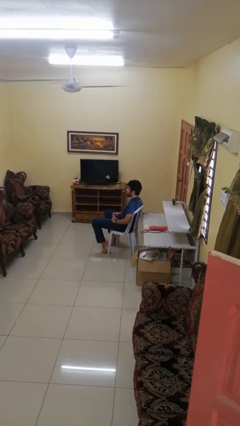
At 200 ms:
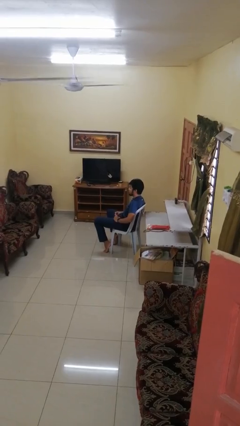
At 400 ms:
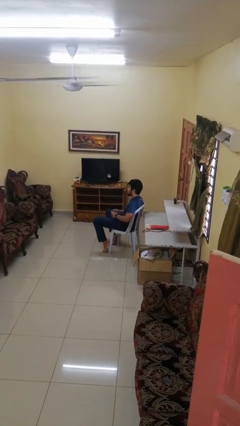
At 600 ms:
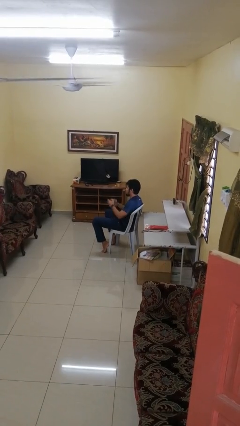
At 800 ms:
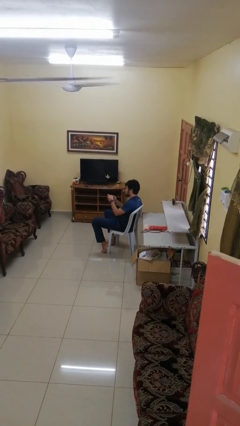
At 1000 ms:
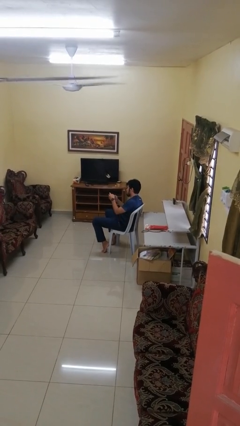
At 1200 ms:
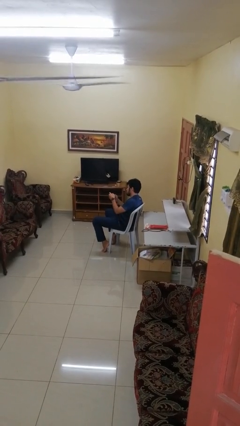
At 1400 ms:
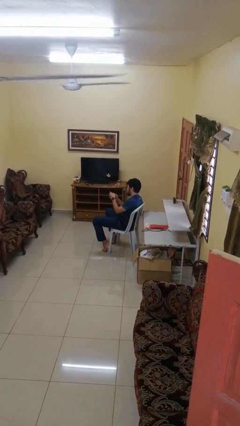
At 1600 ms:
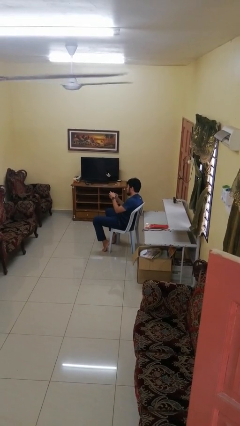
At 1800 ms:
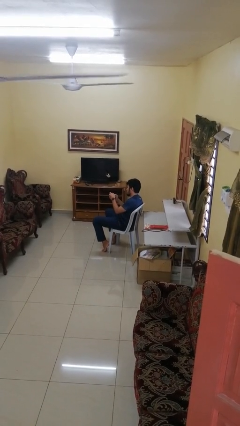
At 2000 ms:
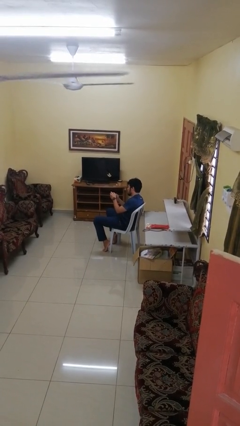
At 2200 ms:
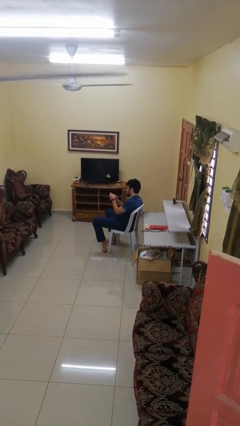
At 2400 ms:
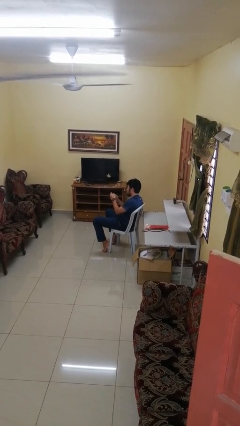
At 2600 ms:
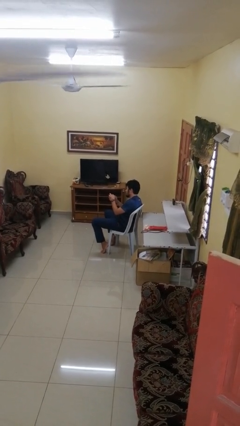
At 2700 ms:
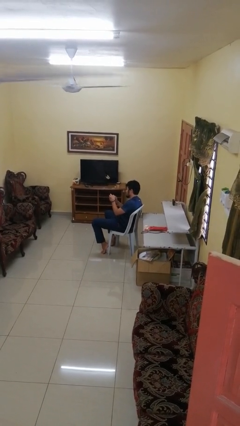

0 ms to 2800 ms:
person interacts with handheld game

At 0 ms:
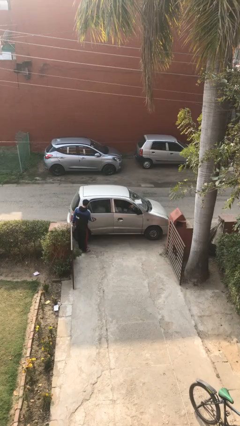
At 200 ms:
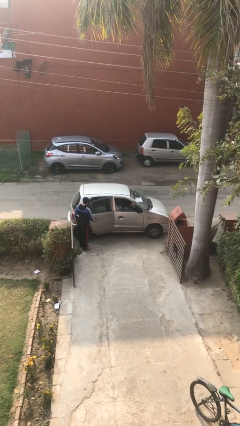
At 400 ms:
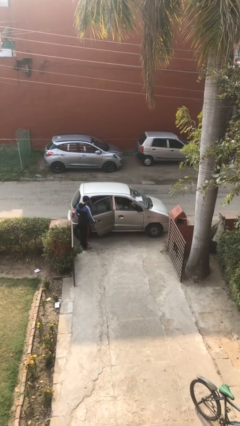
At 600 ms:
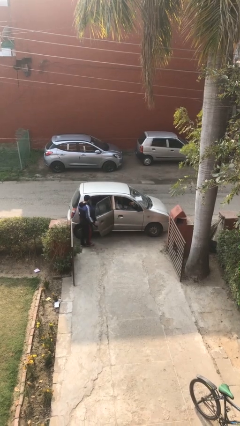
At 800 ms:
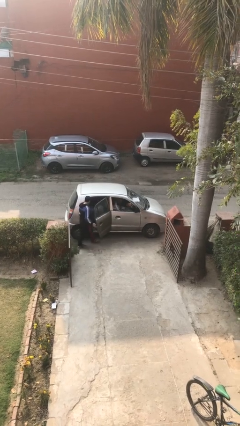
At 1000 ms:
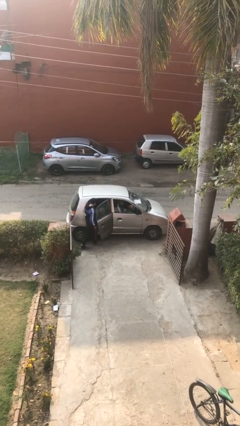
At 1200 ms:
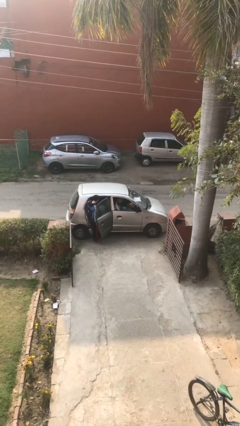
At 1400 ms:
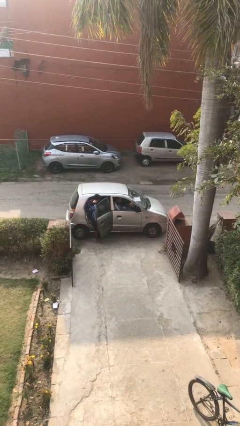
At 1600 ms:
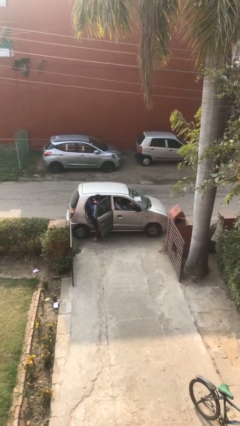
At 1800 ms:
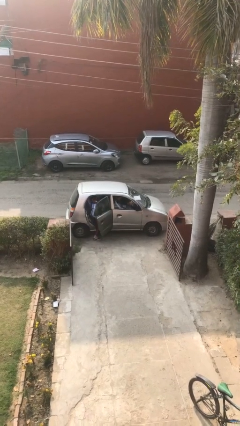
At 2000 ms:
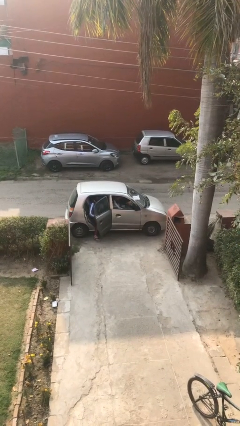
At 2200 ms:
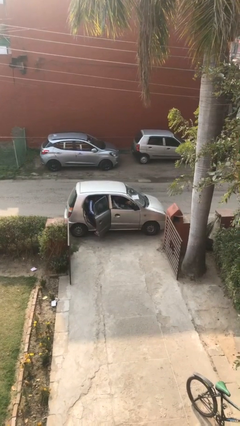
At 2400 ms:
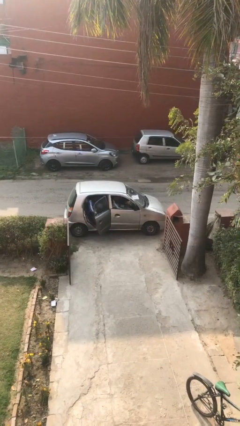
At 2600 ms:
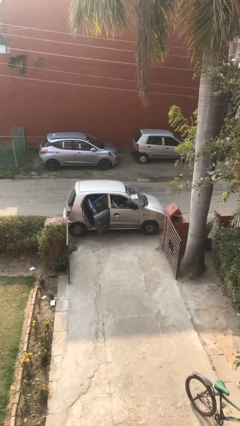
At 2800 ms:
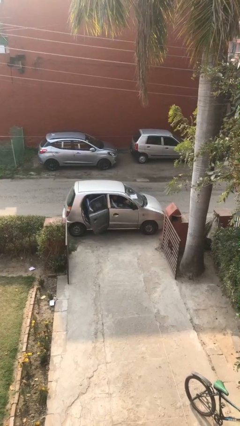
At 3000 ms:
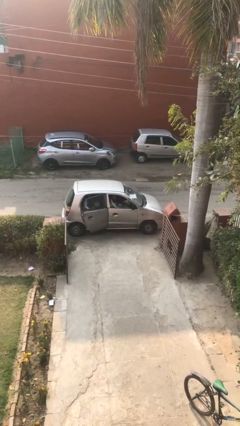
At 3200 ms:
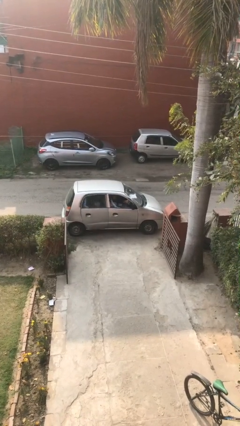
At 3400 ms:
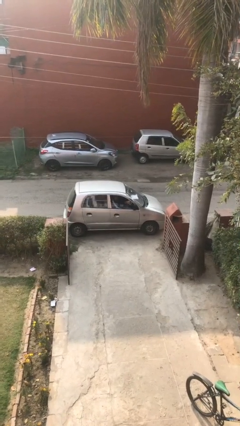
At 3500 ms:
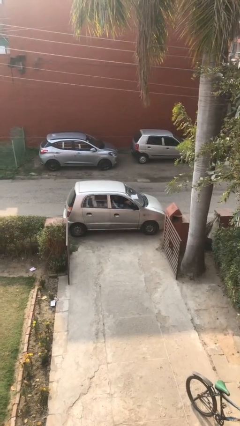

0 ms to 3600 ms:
car picks up person

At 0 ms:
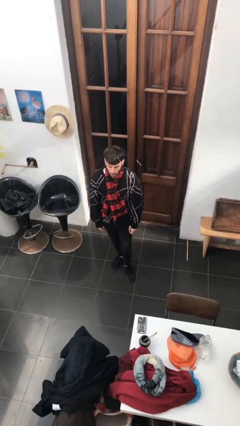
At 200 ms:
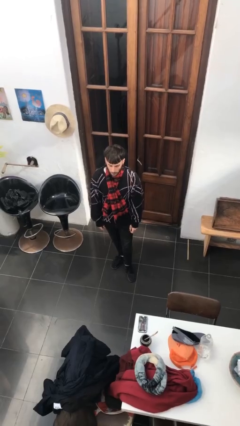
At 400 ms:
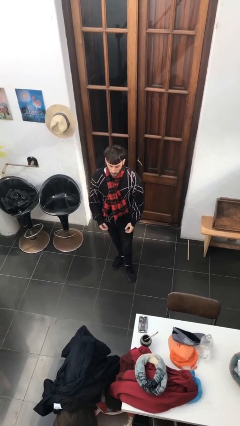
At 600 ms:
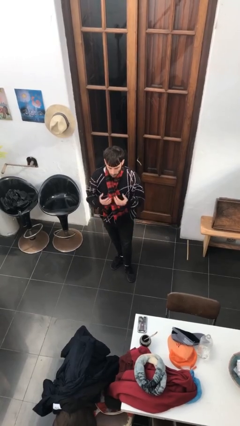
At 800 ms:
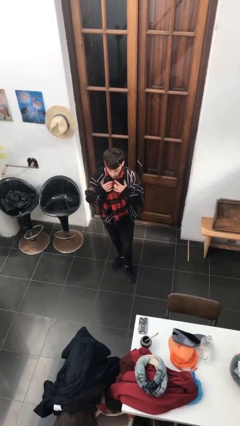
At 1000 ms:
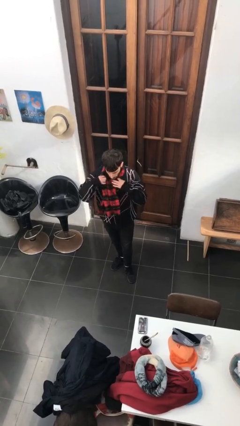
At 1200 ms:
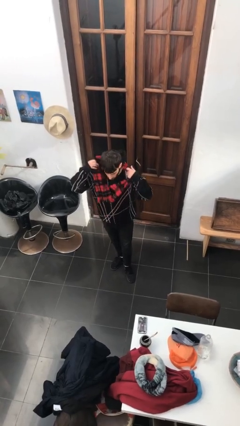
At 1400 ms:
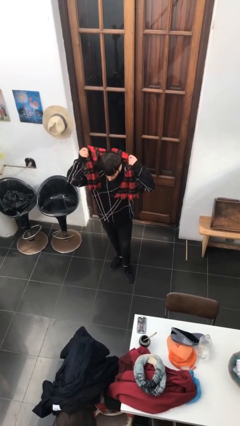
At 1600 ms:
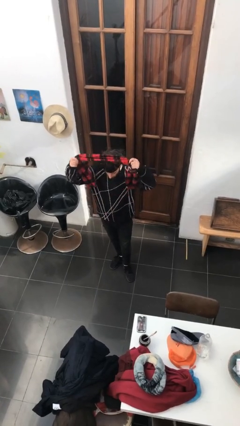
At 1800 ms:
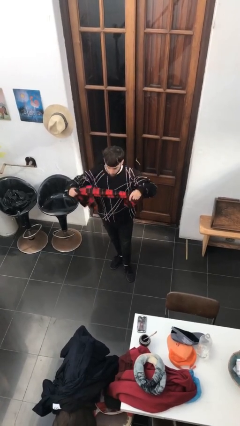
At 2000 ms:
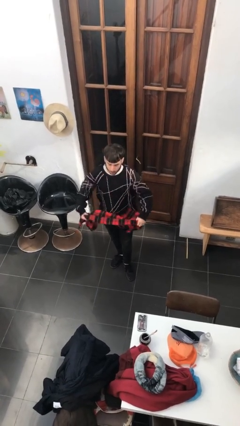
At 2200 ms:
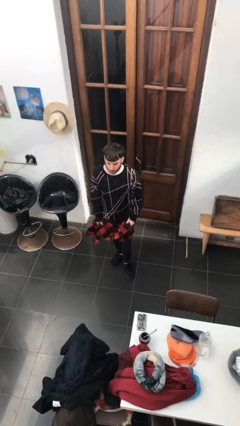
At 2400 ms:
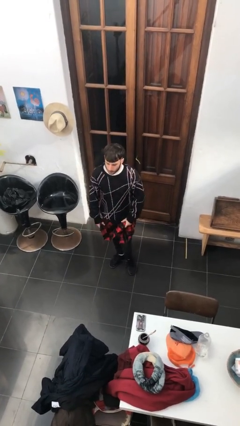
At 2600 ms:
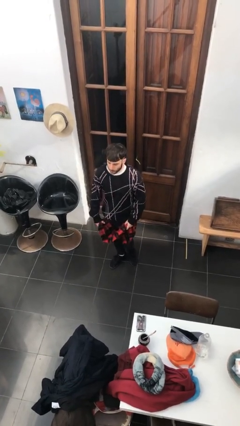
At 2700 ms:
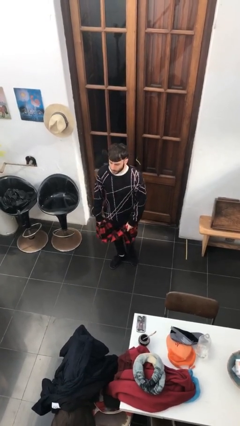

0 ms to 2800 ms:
person takes off scarf

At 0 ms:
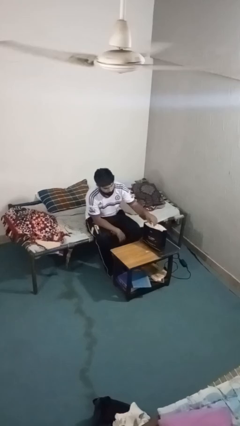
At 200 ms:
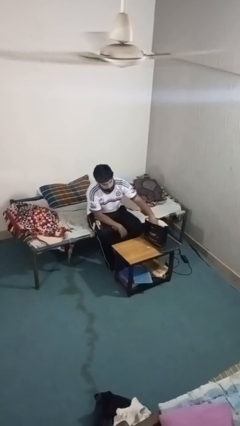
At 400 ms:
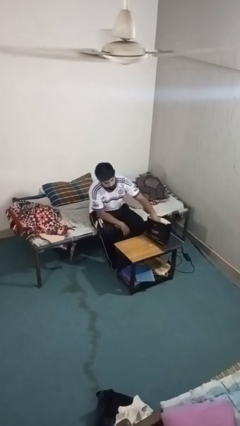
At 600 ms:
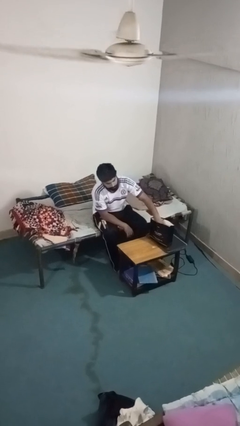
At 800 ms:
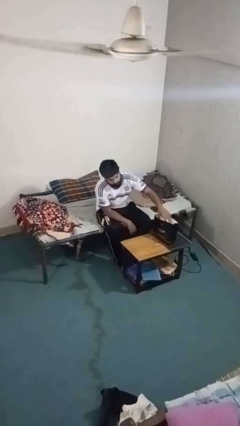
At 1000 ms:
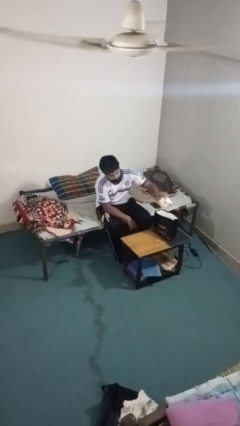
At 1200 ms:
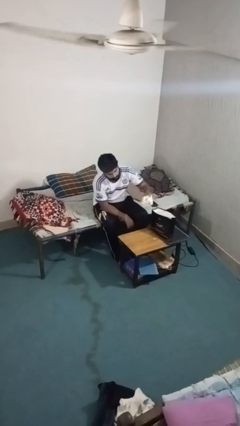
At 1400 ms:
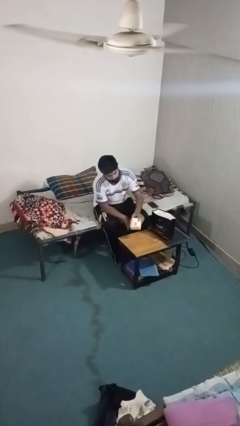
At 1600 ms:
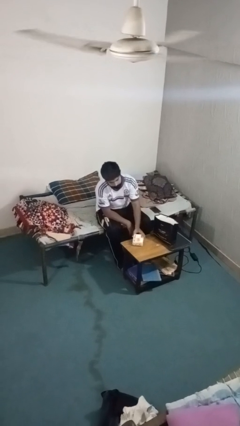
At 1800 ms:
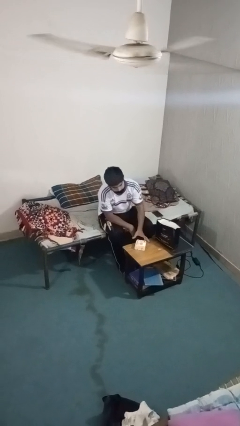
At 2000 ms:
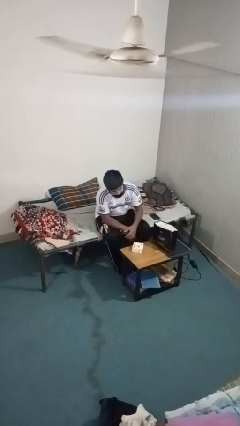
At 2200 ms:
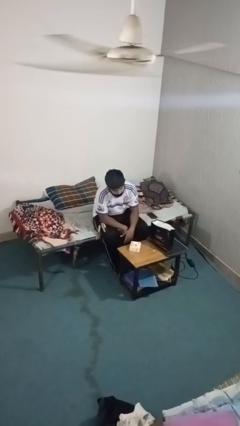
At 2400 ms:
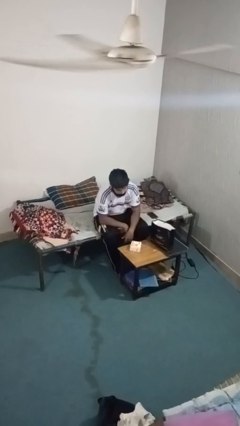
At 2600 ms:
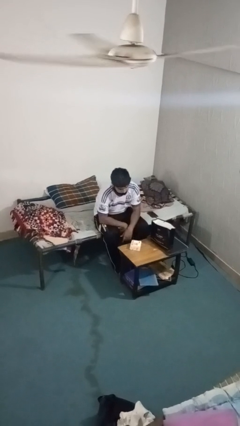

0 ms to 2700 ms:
person takes object from bag

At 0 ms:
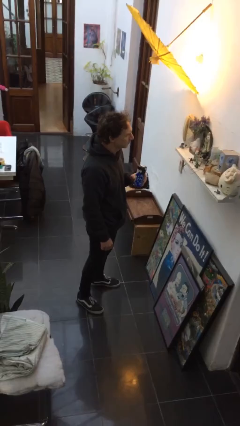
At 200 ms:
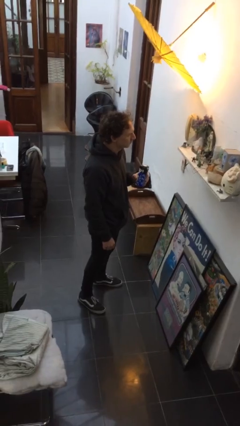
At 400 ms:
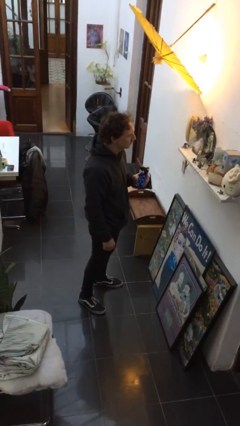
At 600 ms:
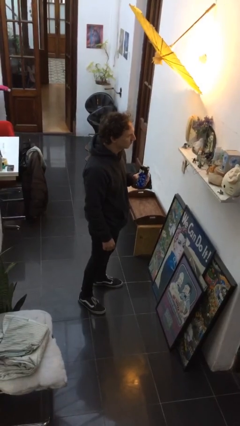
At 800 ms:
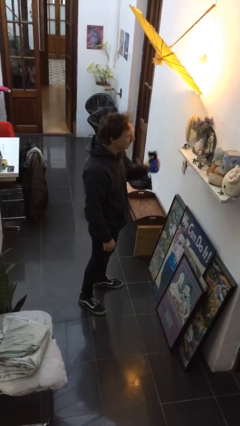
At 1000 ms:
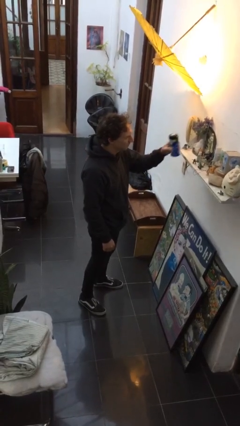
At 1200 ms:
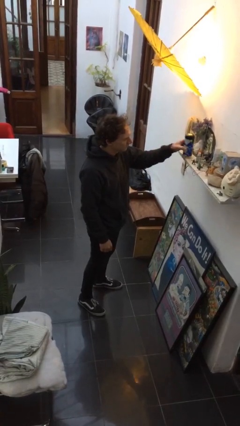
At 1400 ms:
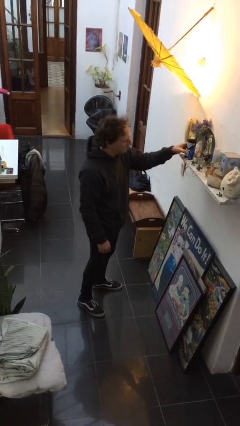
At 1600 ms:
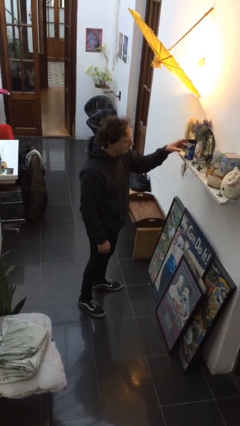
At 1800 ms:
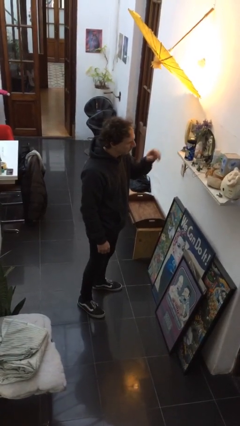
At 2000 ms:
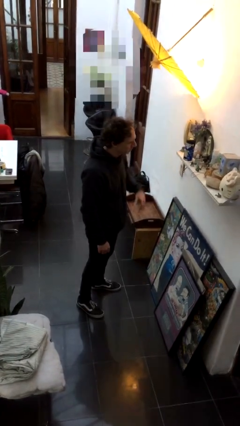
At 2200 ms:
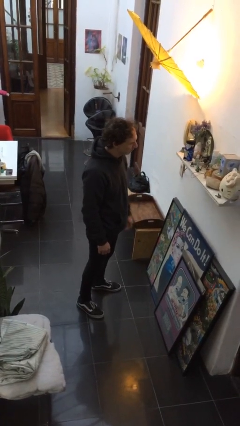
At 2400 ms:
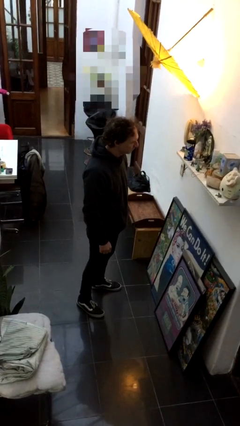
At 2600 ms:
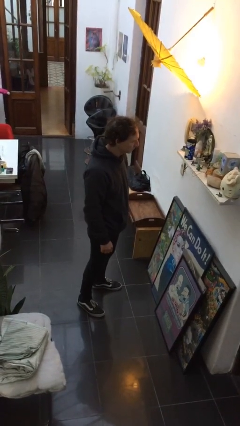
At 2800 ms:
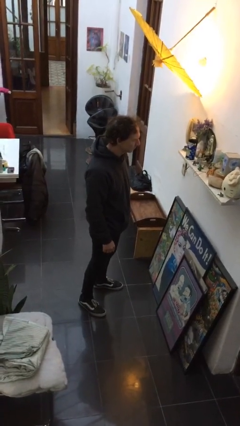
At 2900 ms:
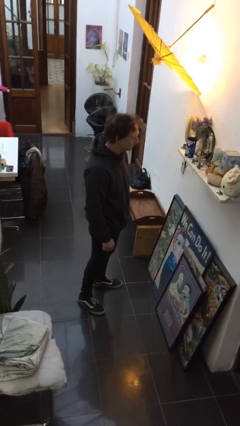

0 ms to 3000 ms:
person puts down object on shelf

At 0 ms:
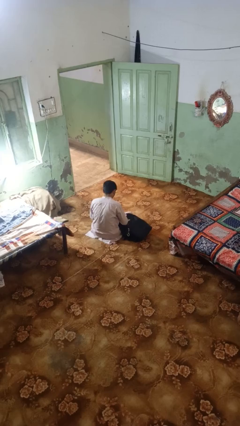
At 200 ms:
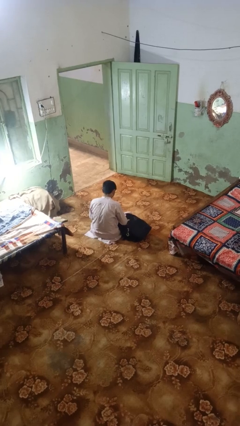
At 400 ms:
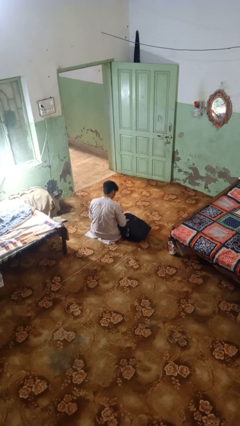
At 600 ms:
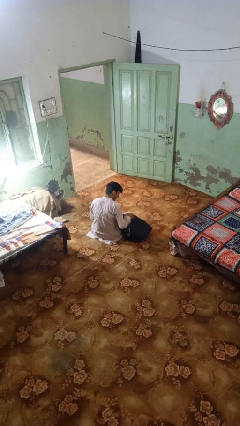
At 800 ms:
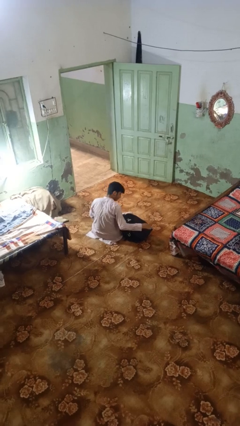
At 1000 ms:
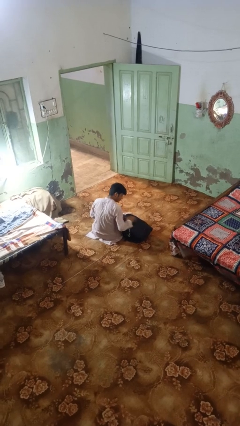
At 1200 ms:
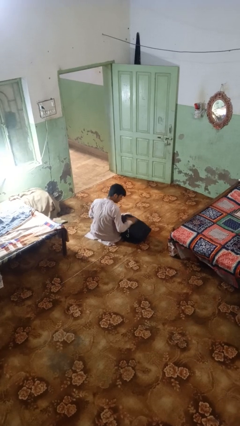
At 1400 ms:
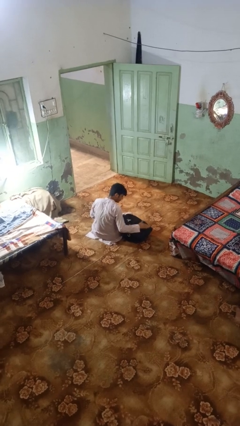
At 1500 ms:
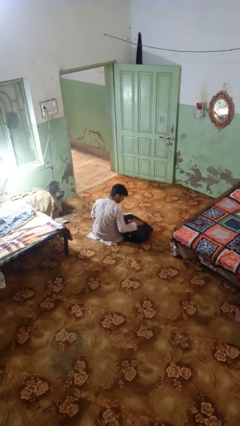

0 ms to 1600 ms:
person waves hand over object

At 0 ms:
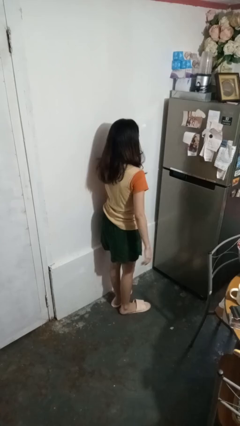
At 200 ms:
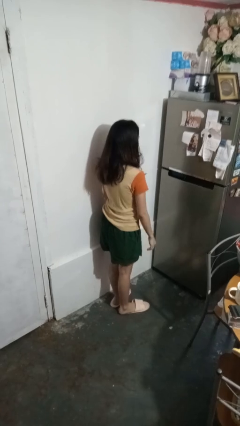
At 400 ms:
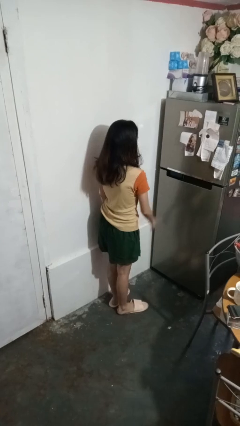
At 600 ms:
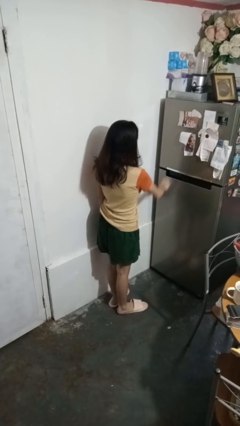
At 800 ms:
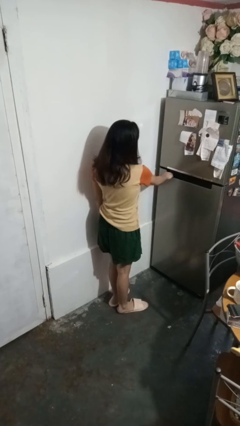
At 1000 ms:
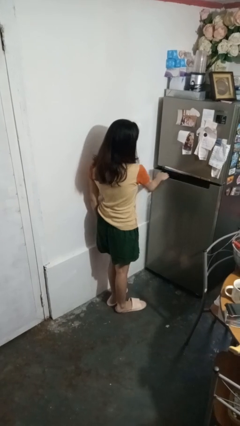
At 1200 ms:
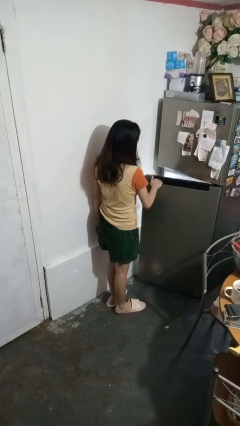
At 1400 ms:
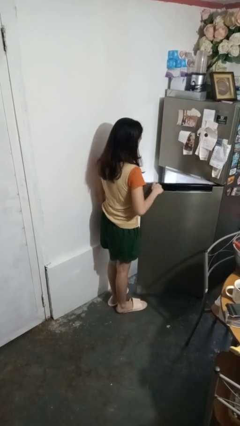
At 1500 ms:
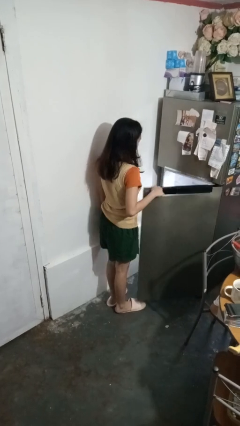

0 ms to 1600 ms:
person opens refrigerator
